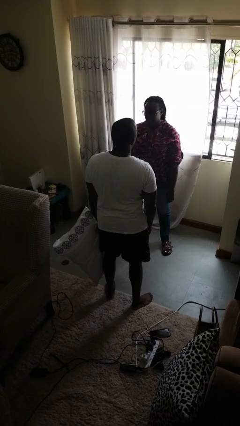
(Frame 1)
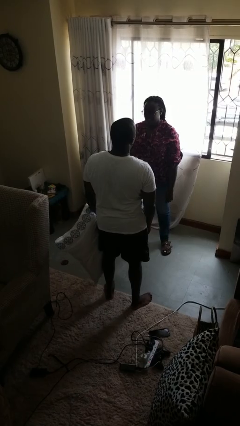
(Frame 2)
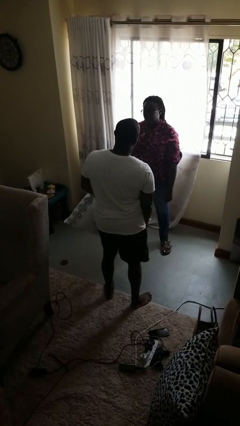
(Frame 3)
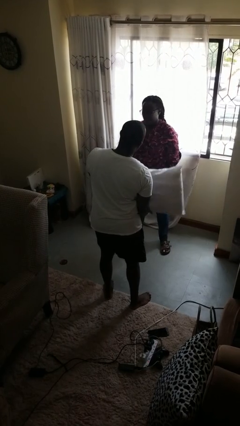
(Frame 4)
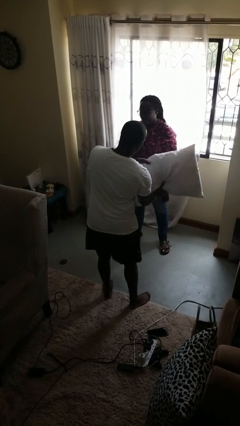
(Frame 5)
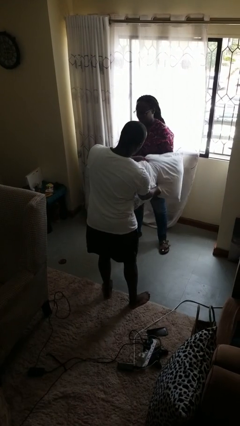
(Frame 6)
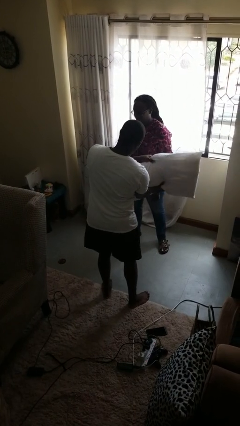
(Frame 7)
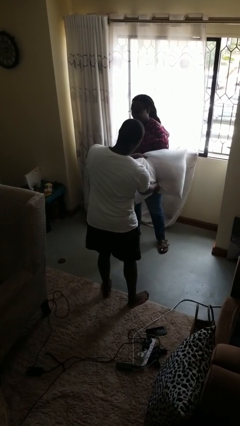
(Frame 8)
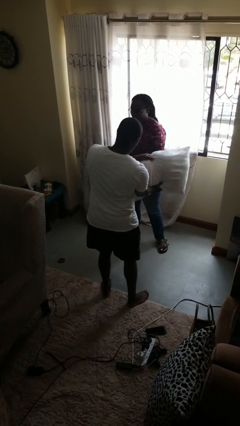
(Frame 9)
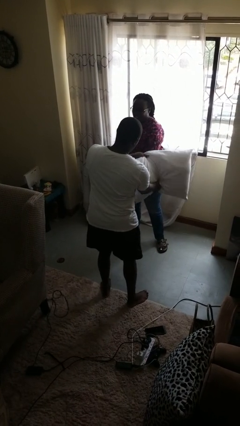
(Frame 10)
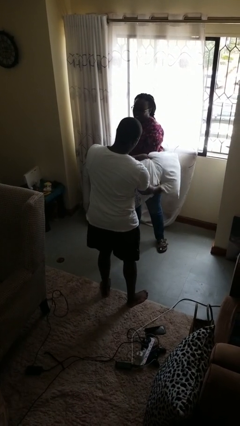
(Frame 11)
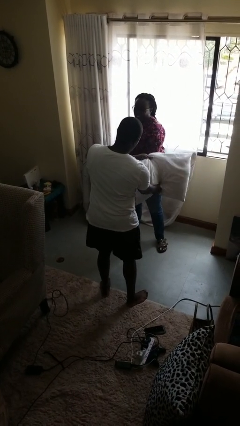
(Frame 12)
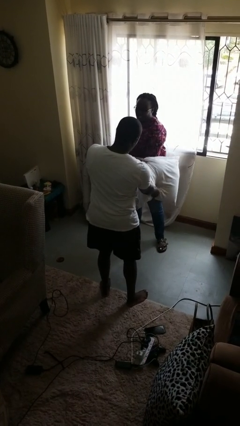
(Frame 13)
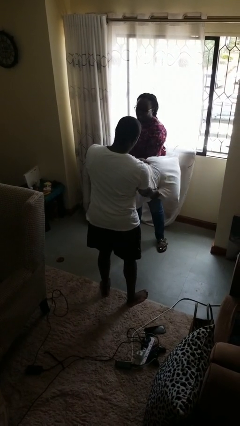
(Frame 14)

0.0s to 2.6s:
person hits person with pillow

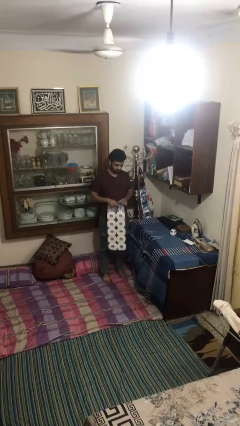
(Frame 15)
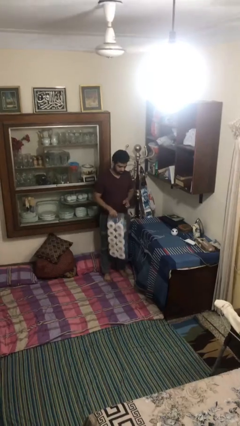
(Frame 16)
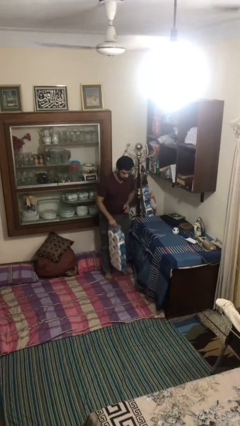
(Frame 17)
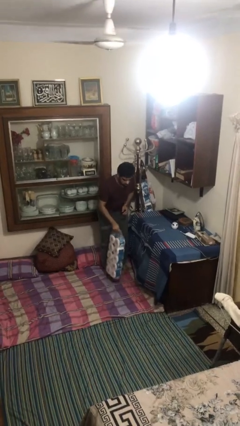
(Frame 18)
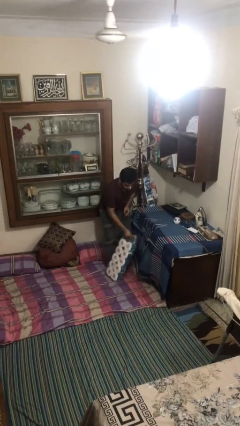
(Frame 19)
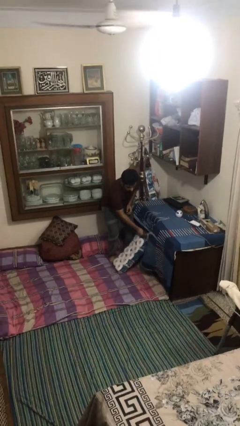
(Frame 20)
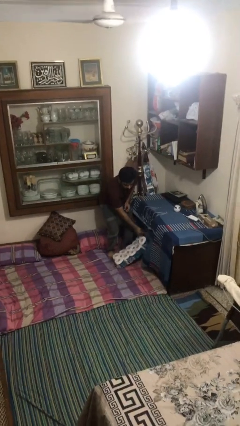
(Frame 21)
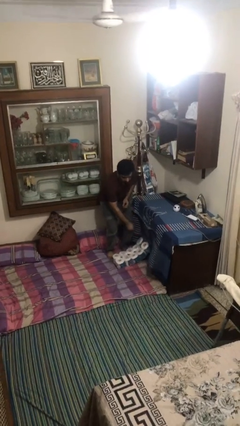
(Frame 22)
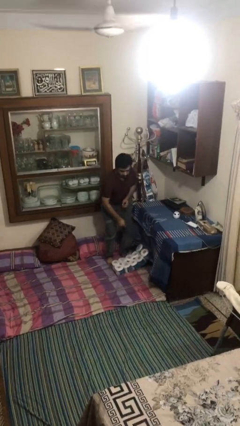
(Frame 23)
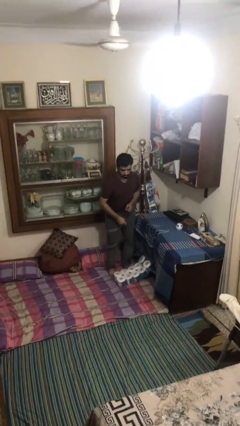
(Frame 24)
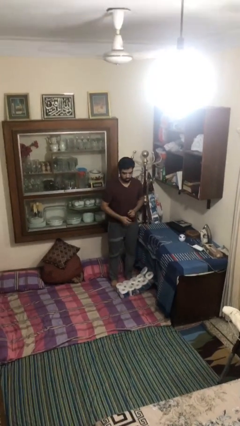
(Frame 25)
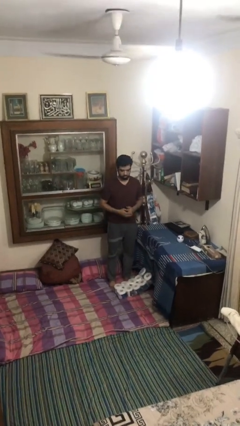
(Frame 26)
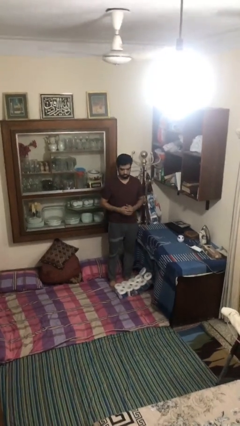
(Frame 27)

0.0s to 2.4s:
person puts down object on floor

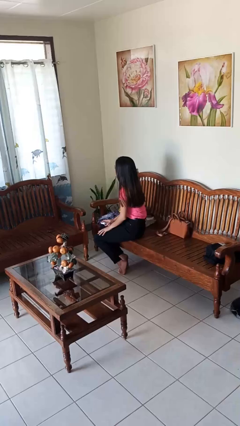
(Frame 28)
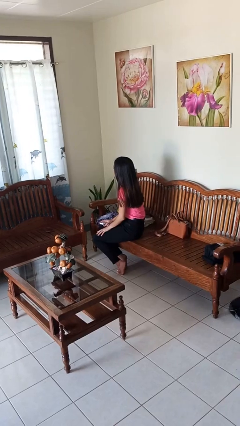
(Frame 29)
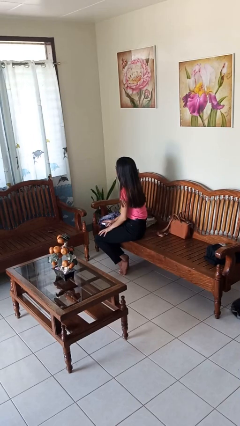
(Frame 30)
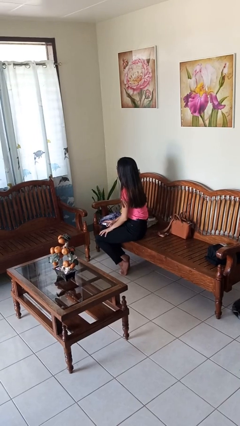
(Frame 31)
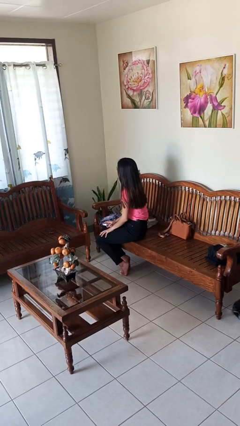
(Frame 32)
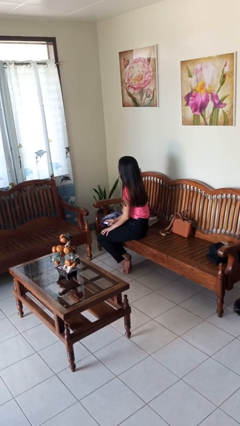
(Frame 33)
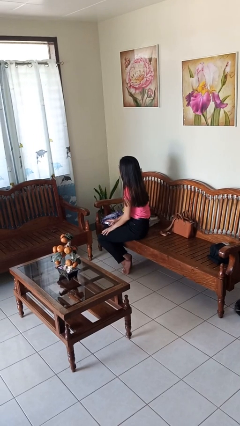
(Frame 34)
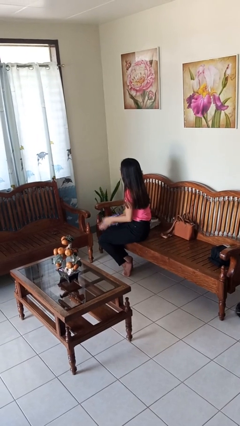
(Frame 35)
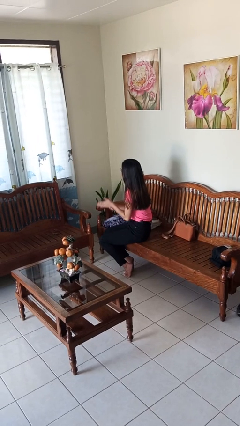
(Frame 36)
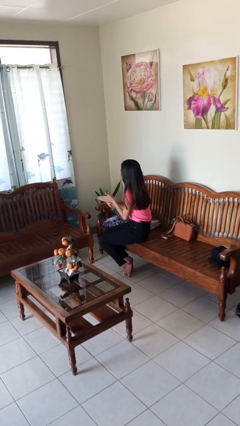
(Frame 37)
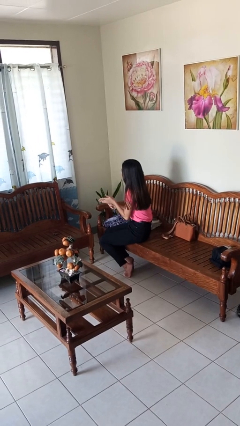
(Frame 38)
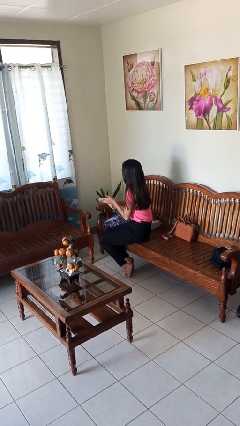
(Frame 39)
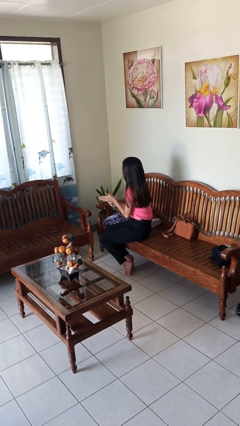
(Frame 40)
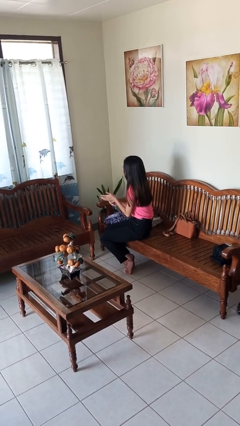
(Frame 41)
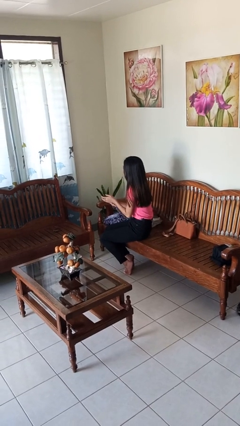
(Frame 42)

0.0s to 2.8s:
person sprays from bottle

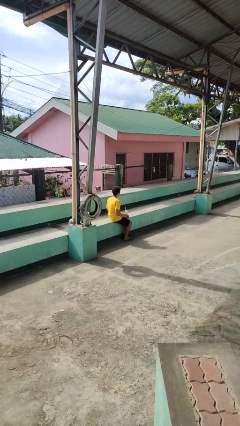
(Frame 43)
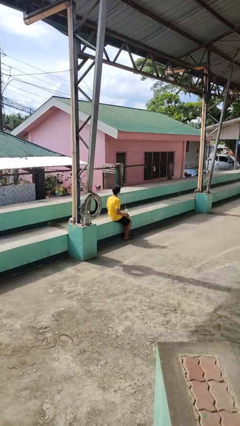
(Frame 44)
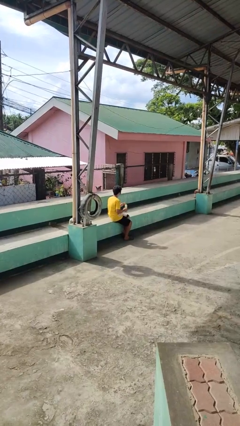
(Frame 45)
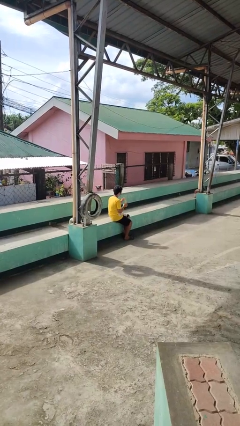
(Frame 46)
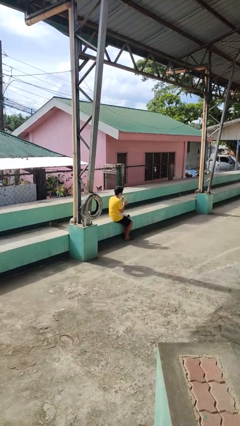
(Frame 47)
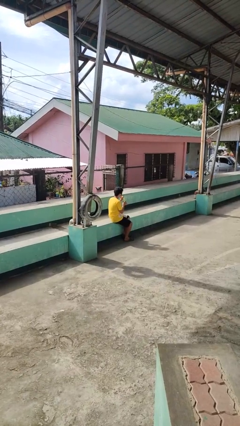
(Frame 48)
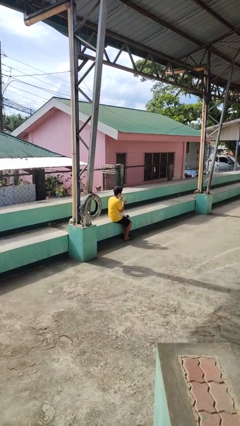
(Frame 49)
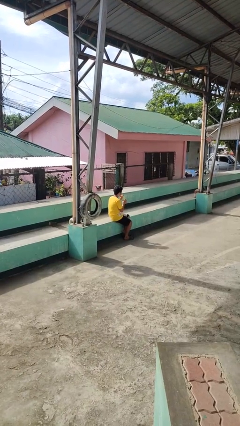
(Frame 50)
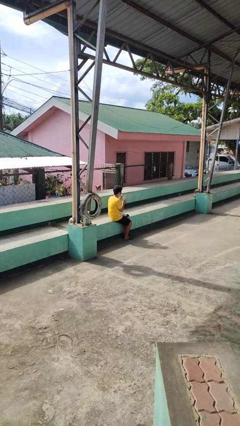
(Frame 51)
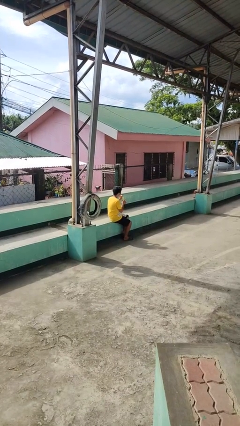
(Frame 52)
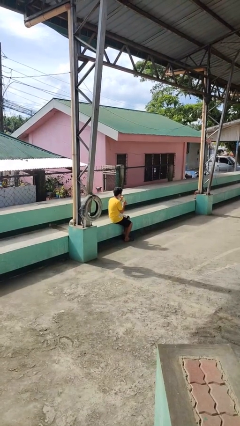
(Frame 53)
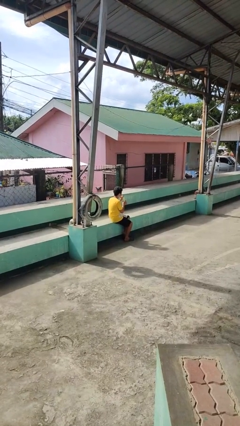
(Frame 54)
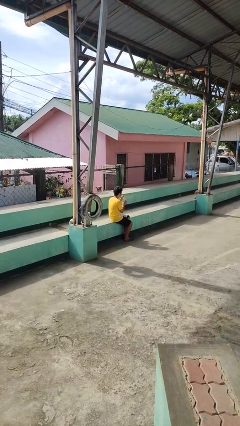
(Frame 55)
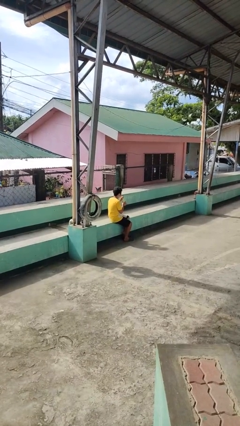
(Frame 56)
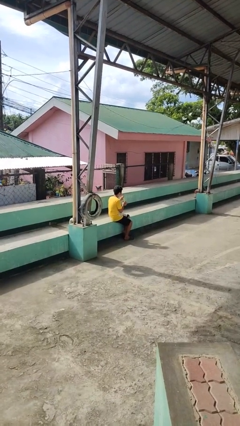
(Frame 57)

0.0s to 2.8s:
person drinks from straw

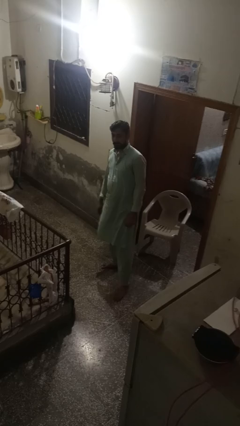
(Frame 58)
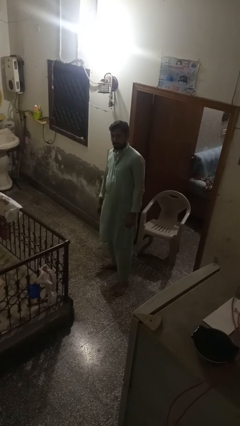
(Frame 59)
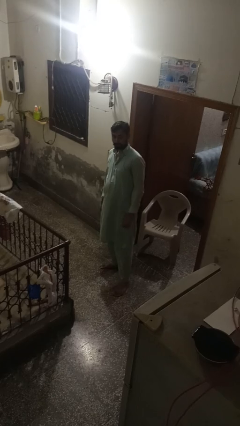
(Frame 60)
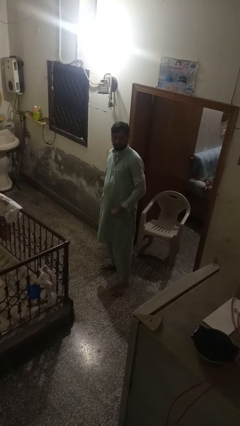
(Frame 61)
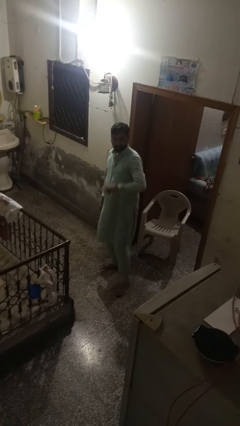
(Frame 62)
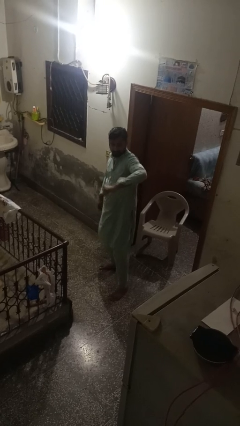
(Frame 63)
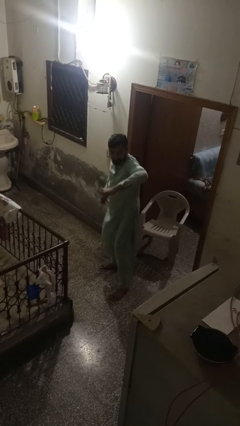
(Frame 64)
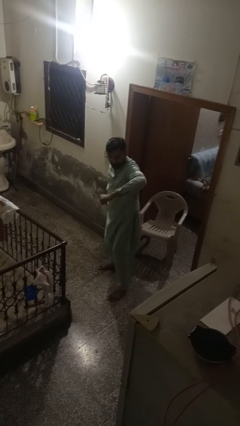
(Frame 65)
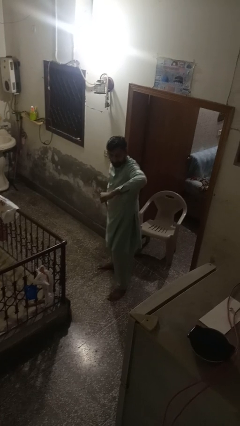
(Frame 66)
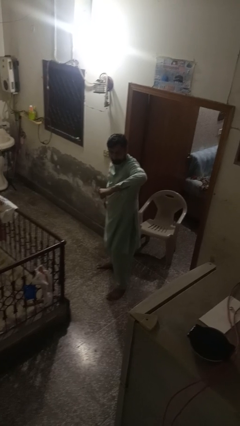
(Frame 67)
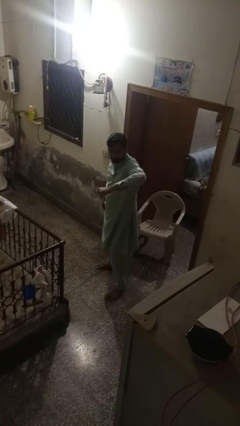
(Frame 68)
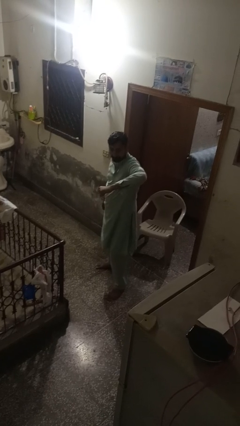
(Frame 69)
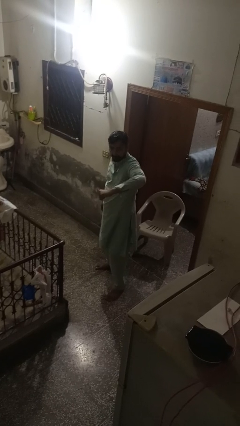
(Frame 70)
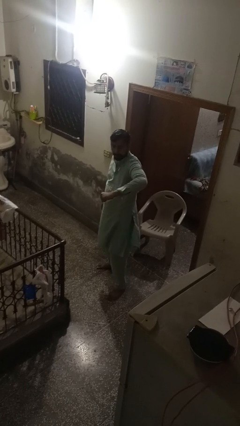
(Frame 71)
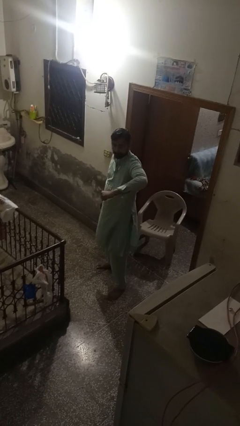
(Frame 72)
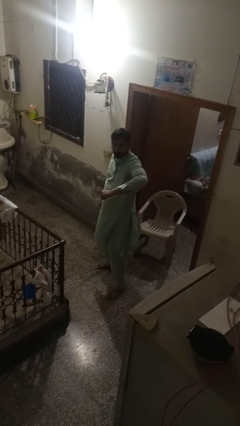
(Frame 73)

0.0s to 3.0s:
person karate chop

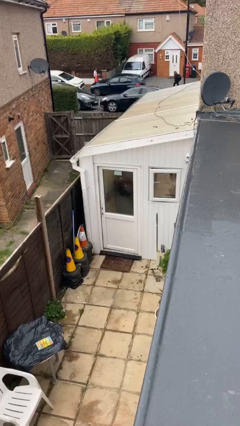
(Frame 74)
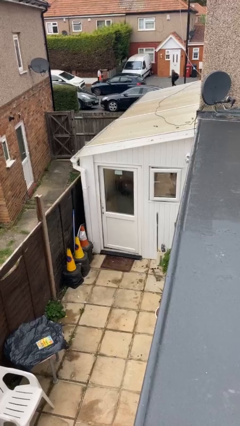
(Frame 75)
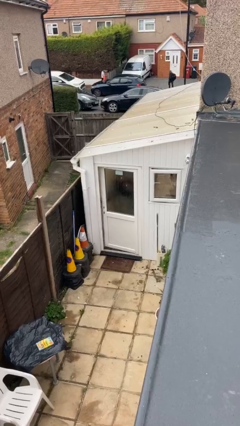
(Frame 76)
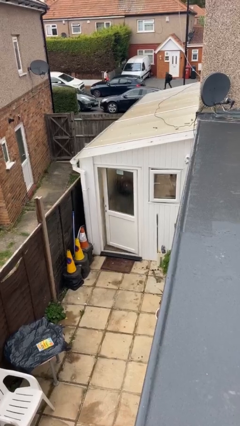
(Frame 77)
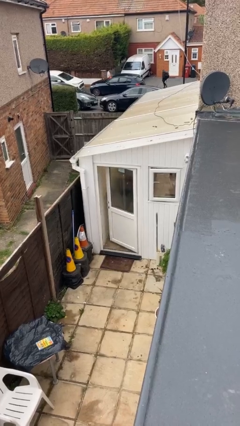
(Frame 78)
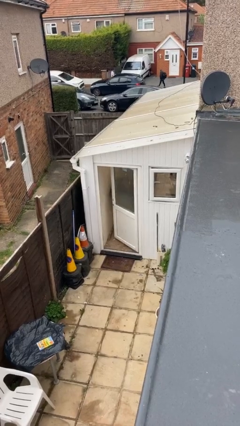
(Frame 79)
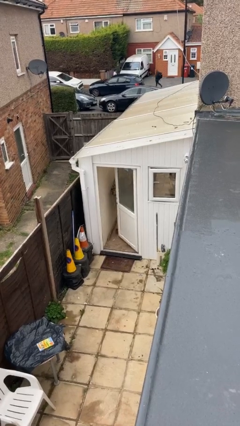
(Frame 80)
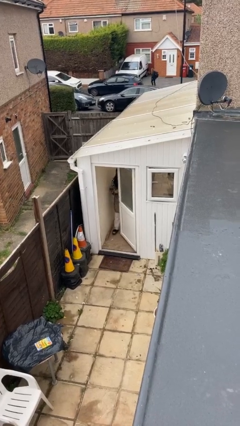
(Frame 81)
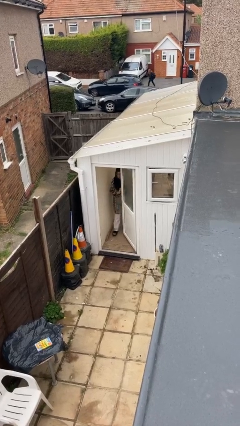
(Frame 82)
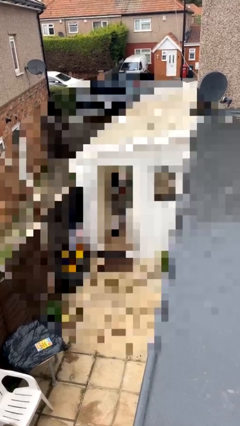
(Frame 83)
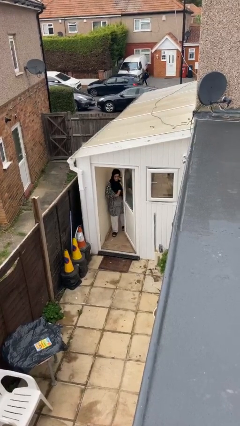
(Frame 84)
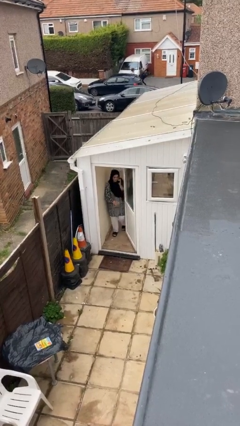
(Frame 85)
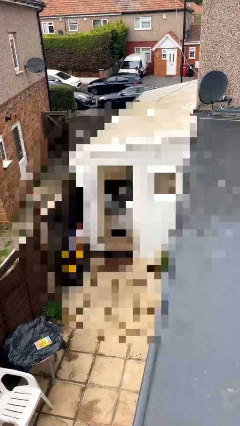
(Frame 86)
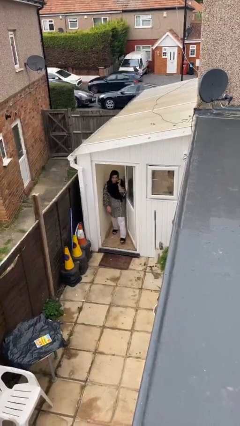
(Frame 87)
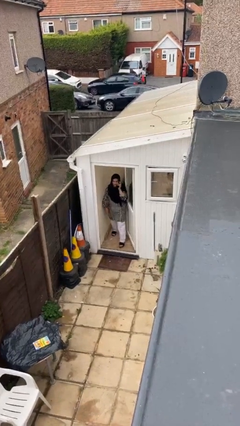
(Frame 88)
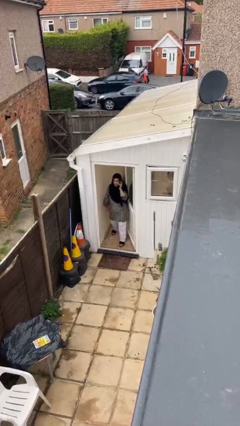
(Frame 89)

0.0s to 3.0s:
person opens facility door

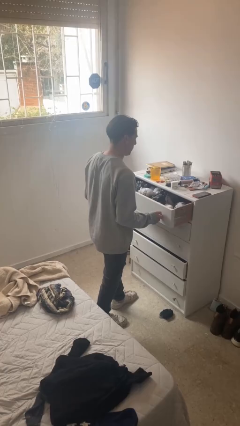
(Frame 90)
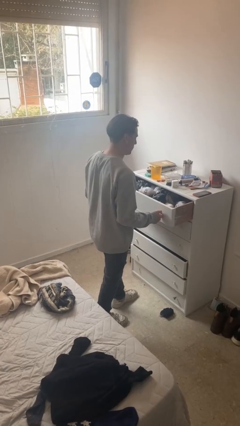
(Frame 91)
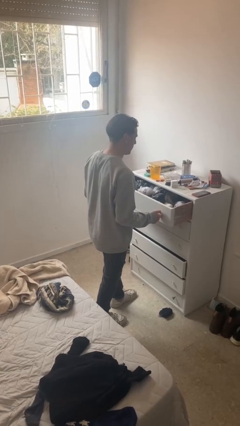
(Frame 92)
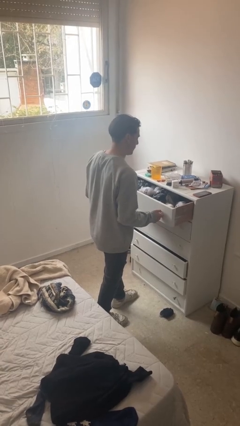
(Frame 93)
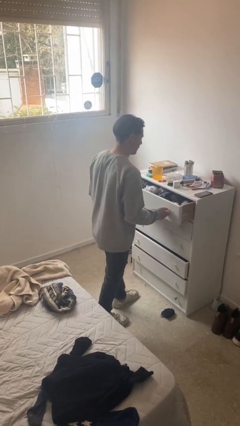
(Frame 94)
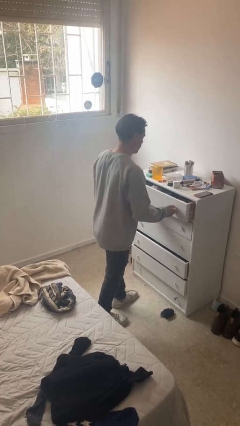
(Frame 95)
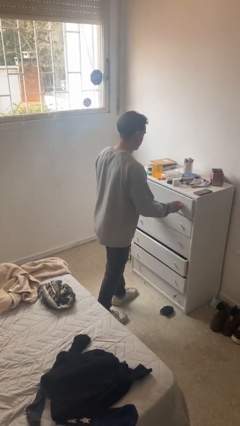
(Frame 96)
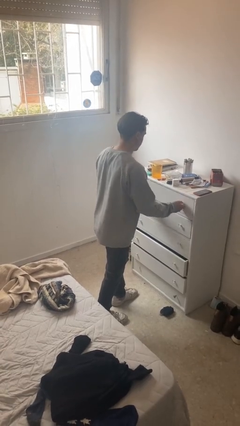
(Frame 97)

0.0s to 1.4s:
person closes dresser drawer
